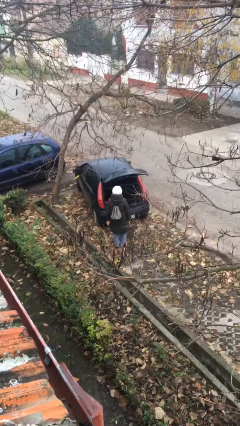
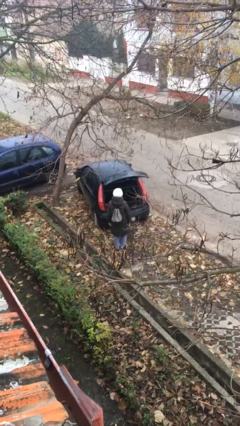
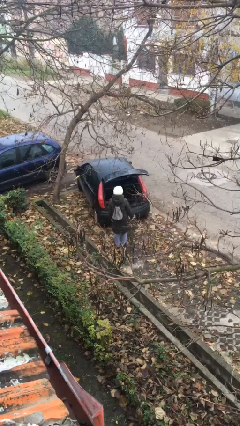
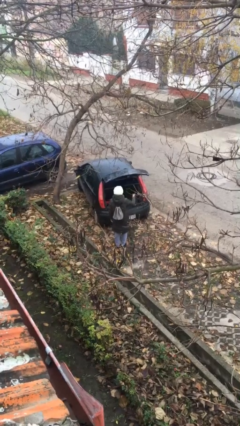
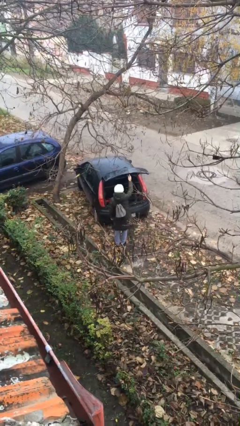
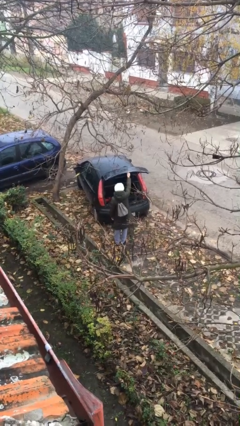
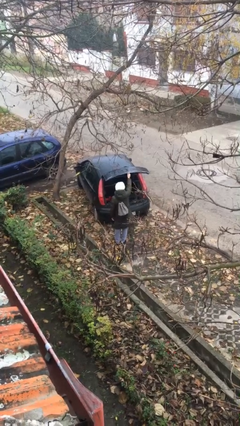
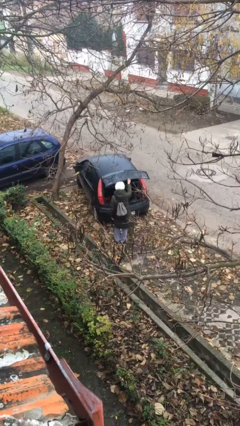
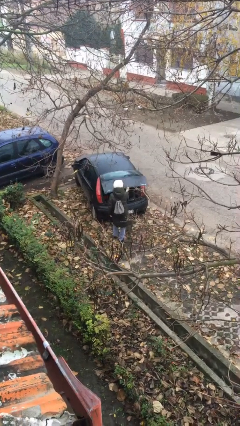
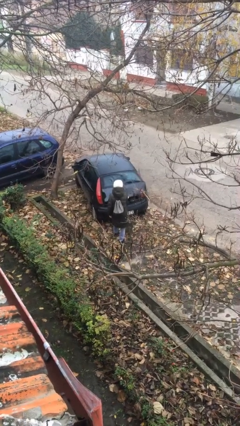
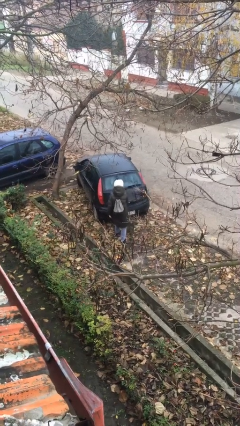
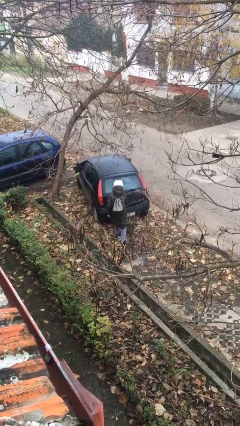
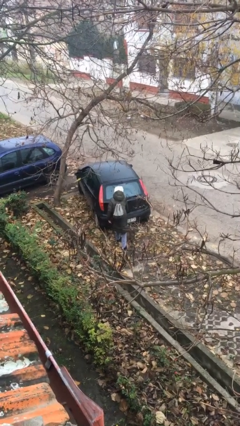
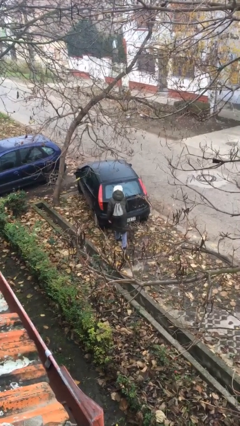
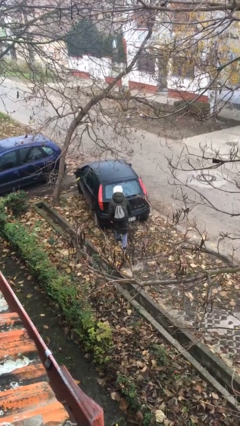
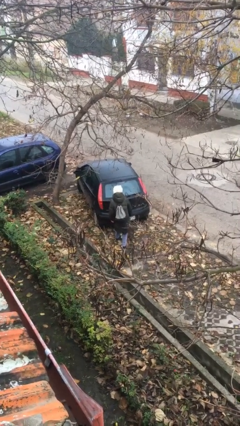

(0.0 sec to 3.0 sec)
person closes car trunk

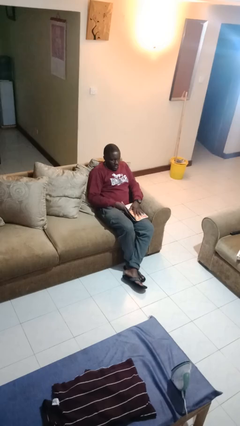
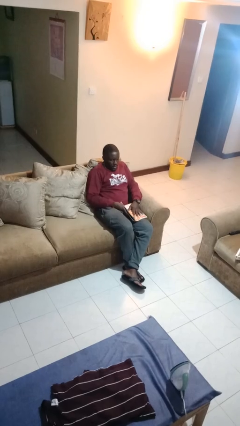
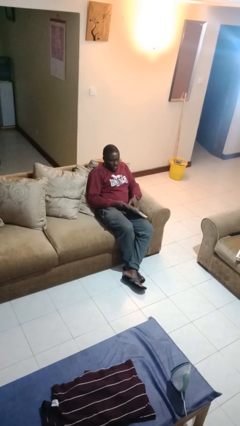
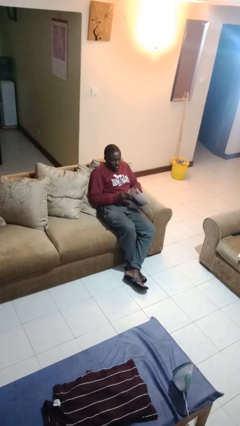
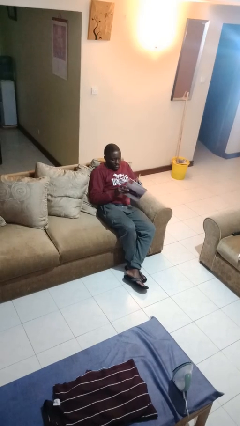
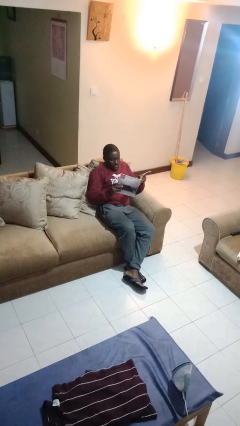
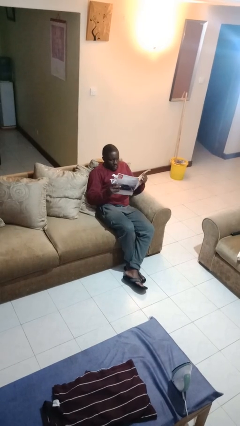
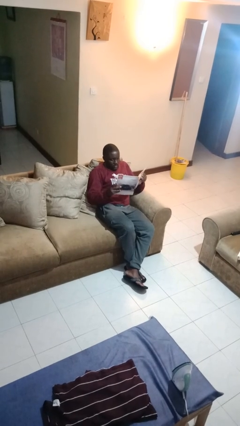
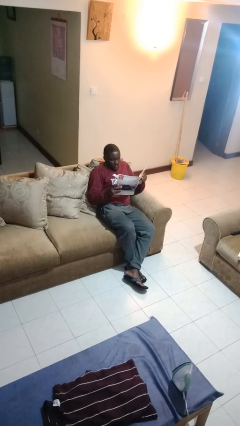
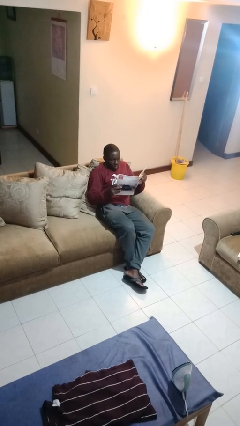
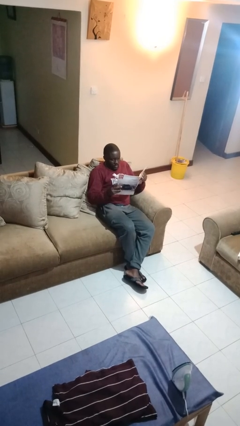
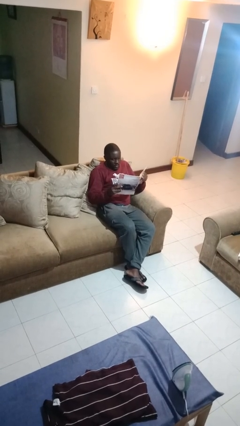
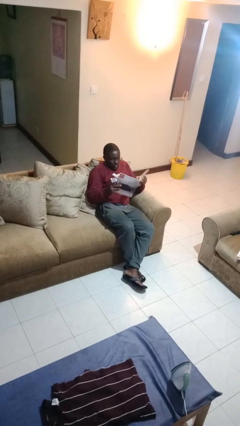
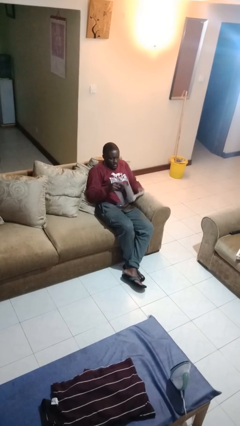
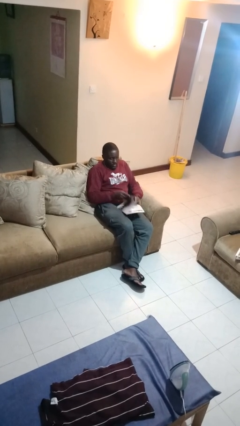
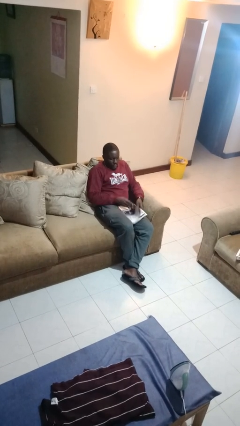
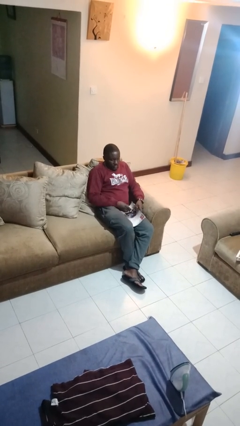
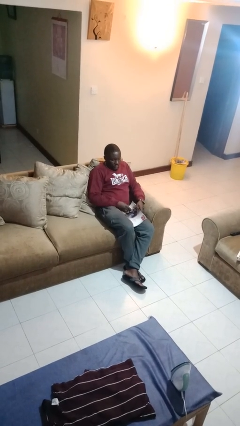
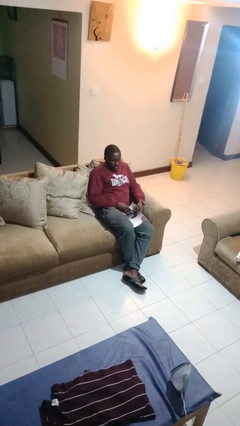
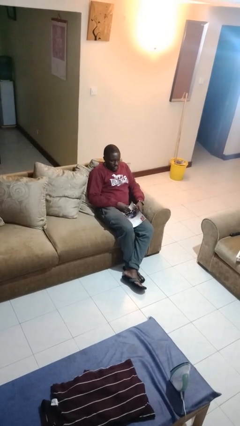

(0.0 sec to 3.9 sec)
person reads magazine

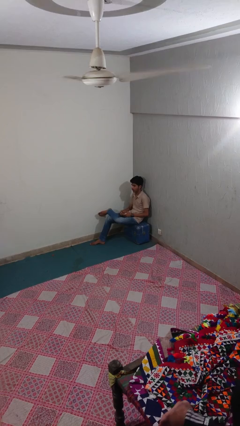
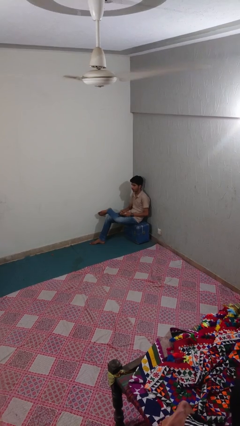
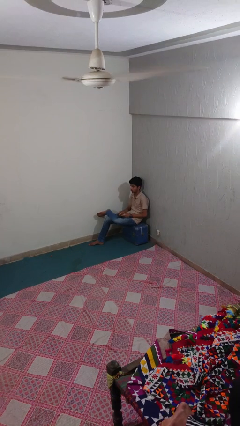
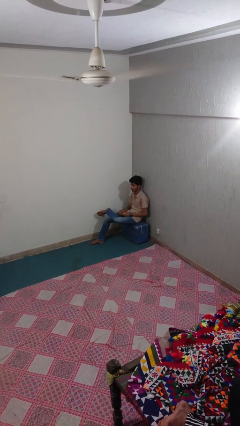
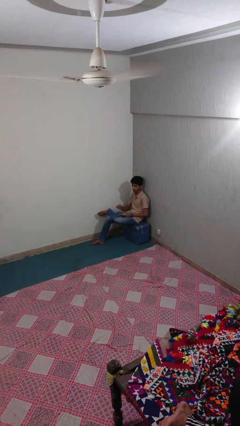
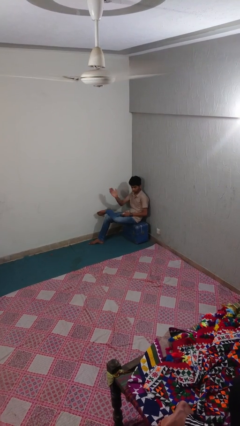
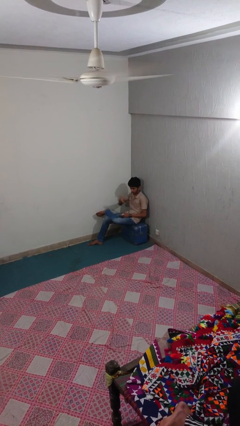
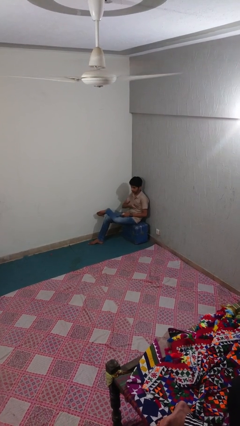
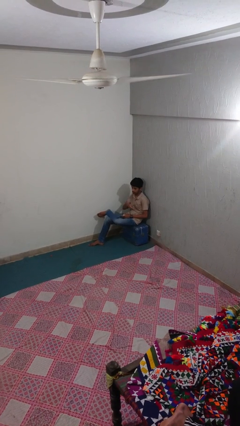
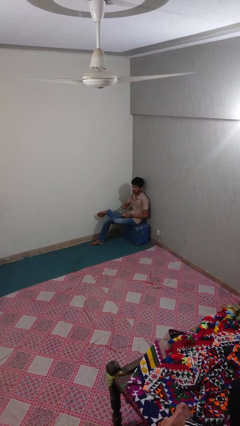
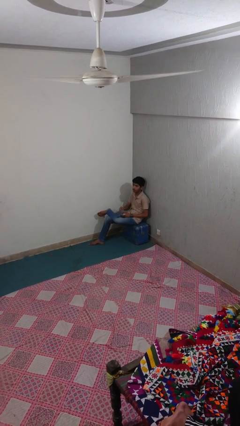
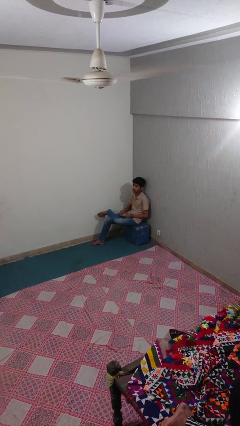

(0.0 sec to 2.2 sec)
person gestures come here

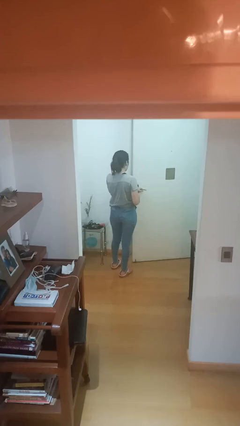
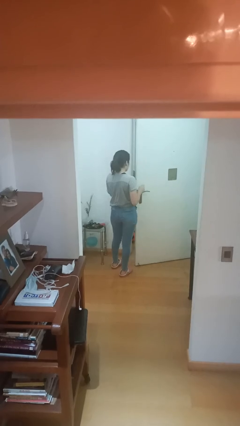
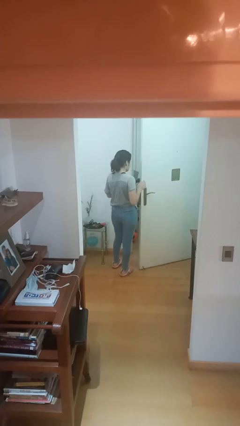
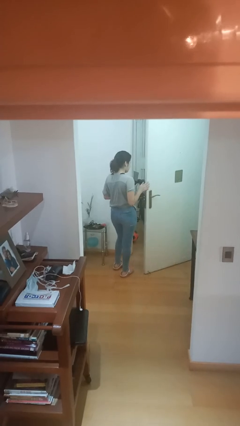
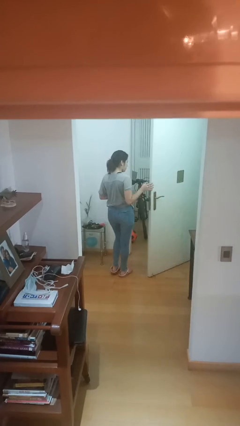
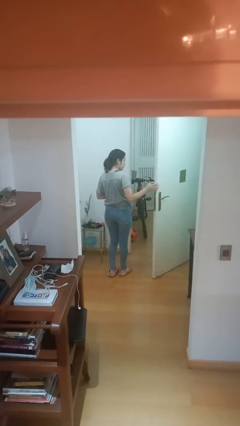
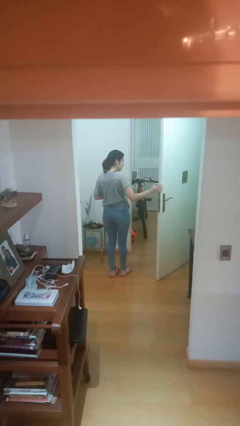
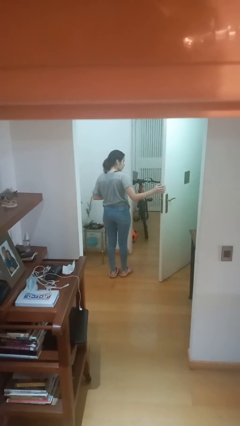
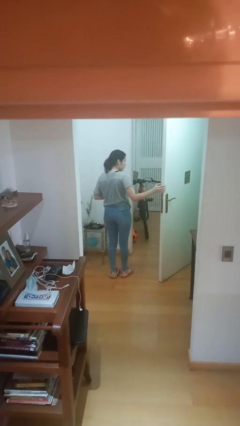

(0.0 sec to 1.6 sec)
person opens facility door

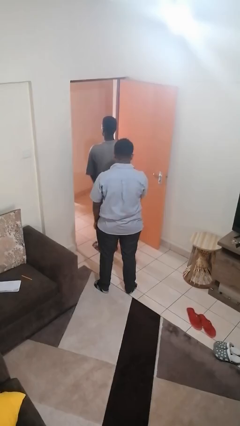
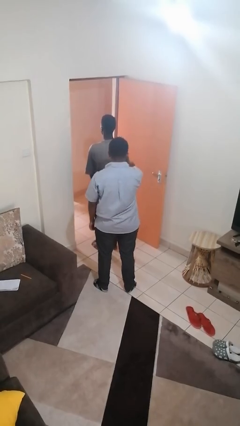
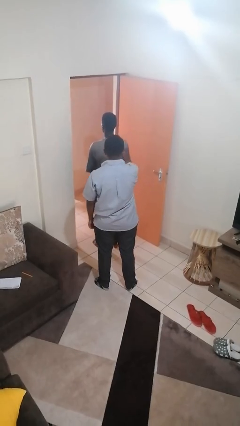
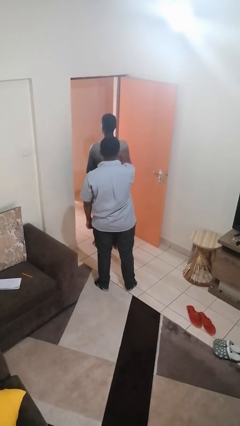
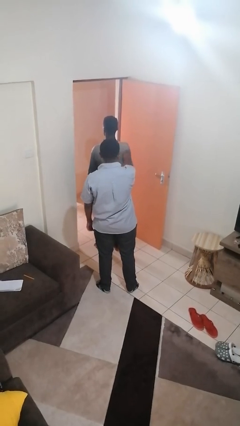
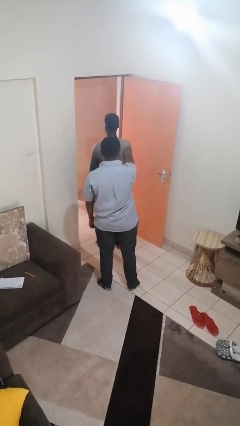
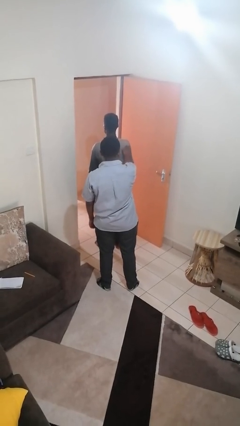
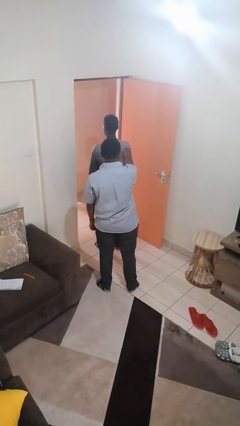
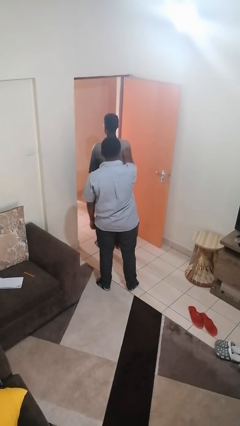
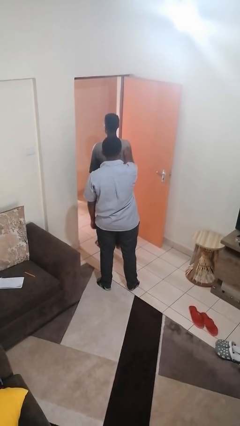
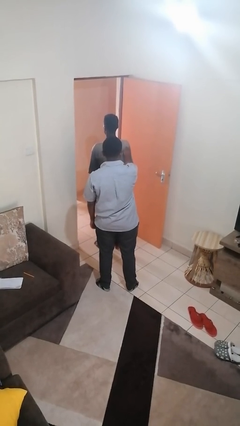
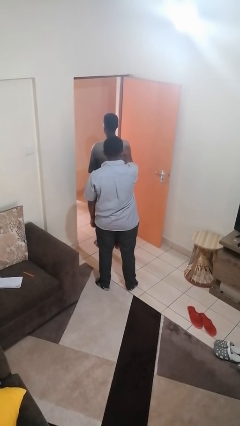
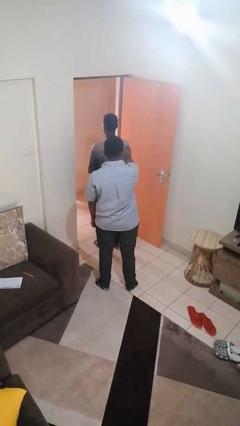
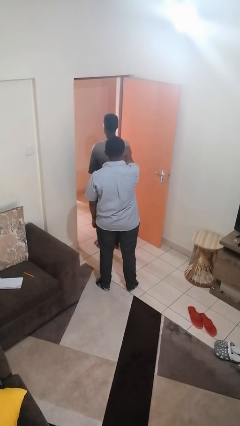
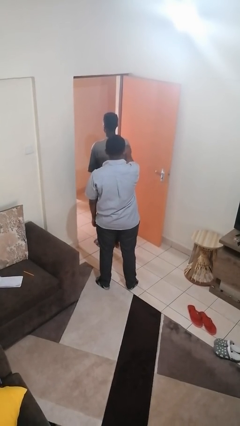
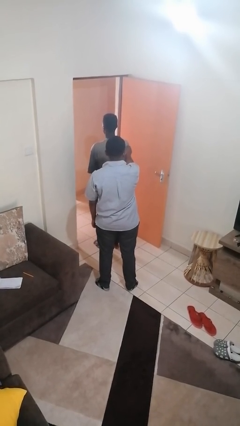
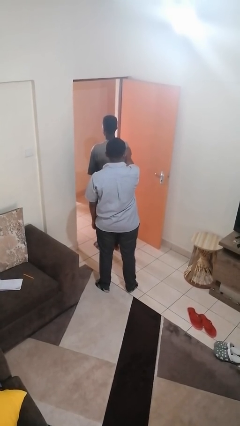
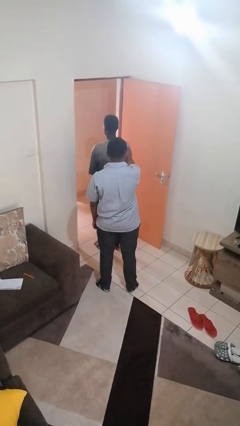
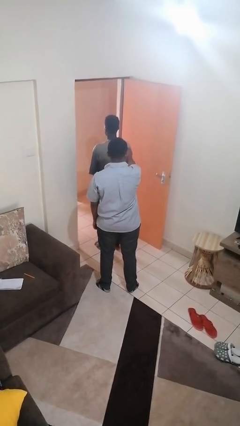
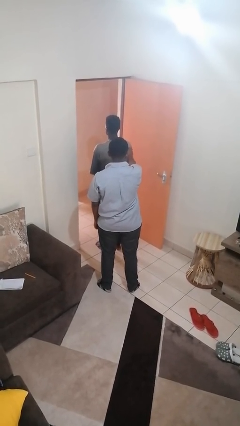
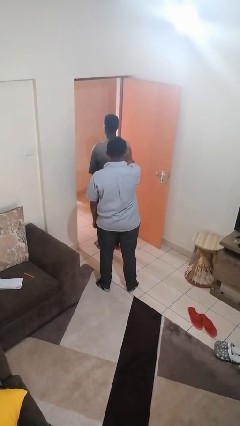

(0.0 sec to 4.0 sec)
person touches back of person

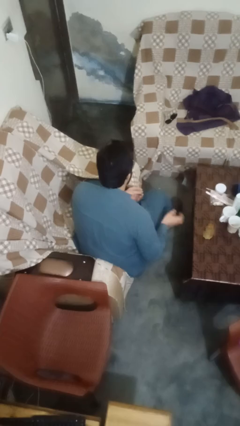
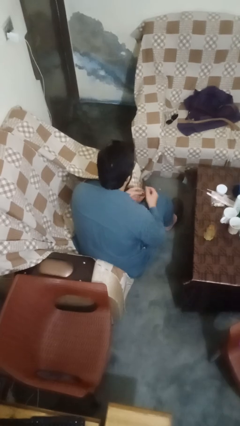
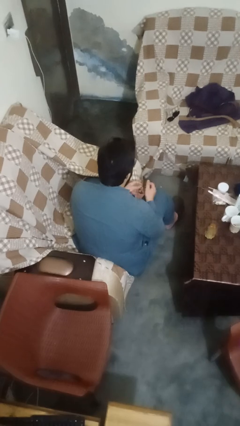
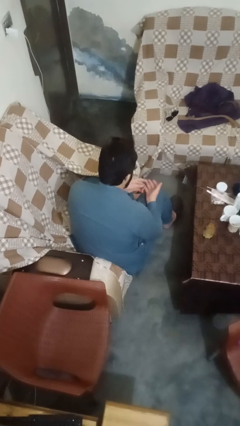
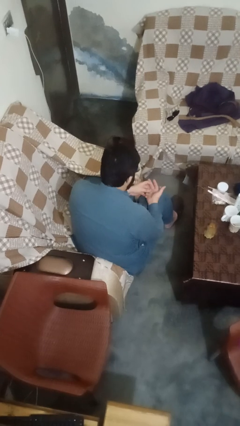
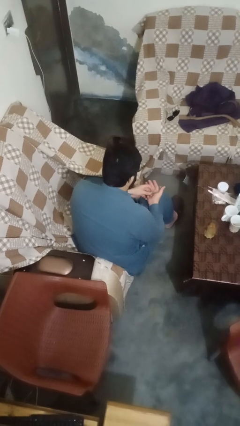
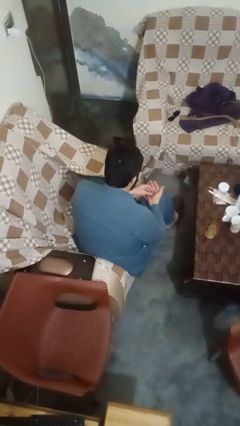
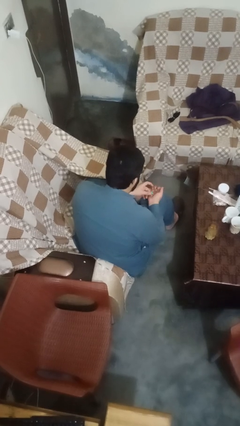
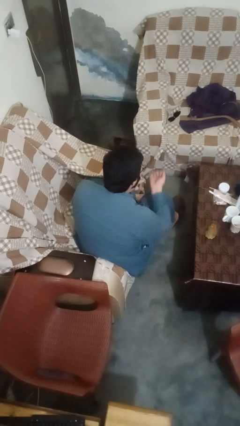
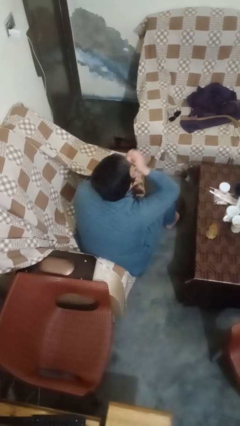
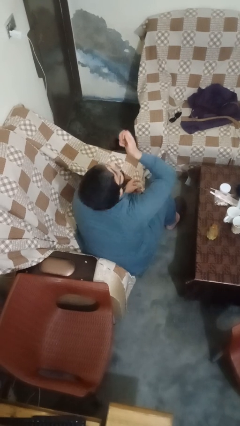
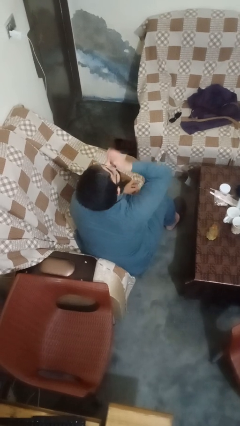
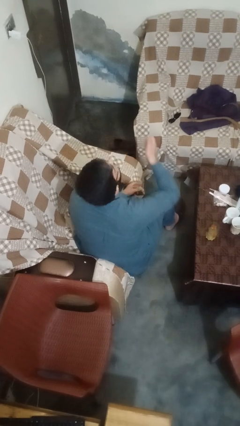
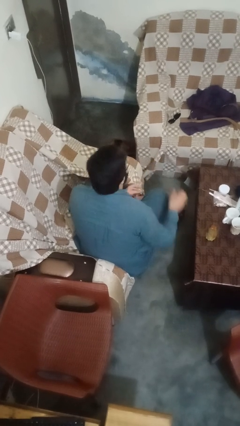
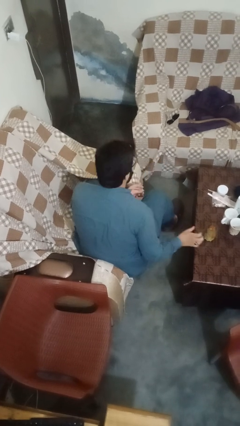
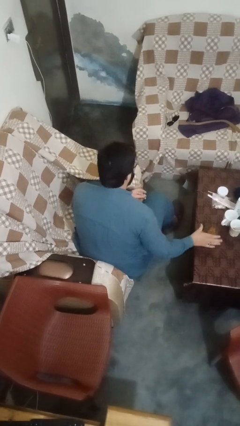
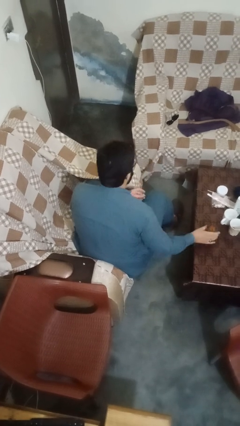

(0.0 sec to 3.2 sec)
person takes medicine pills
